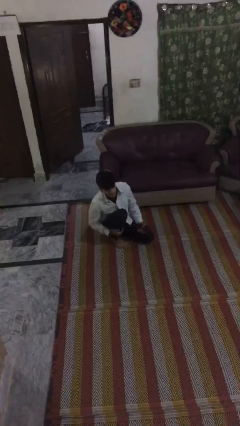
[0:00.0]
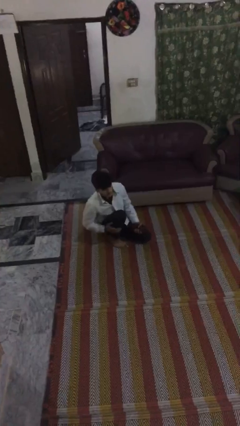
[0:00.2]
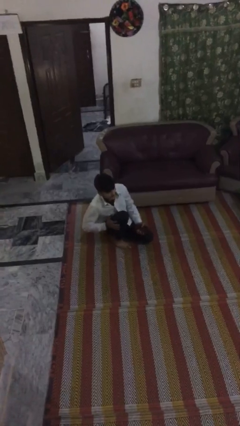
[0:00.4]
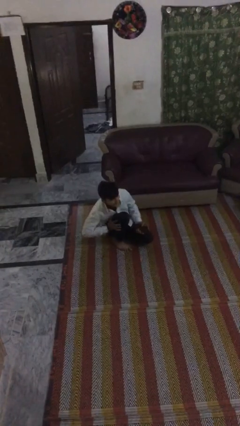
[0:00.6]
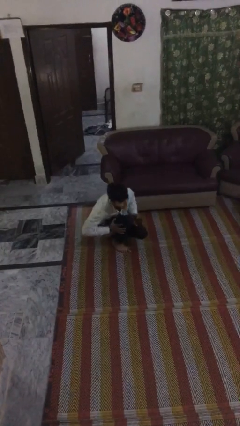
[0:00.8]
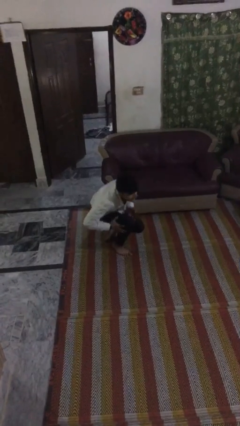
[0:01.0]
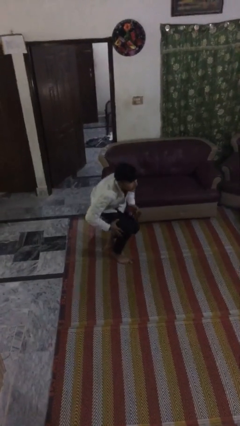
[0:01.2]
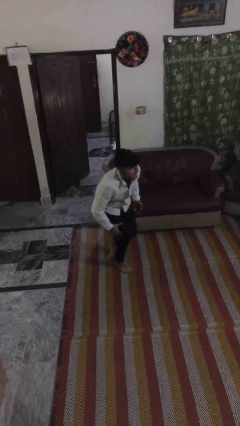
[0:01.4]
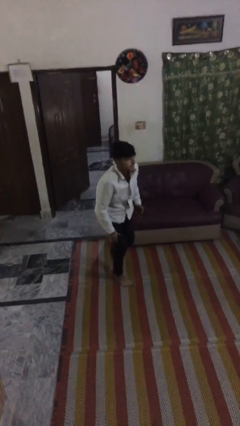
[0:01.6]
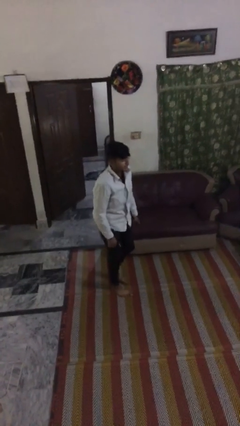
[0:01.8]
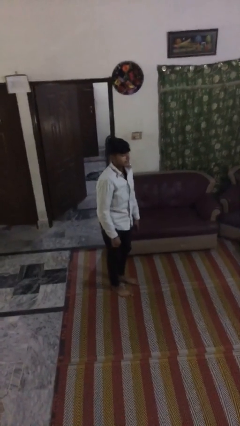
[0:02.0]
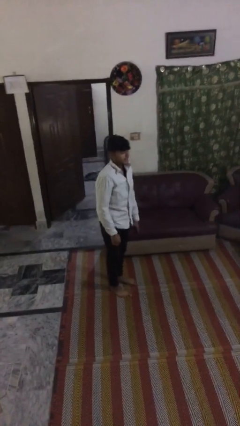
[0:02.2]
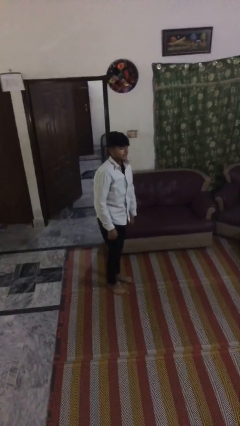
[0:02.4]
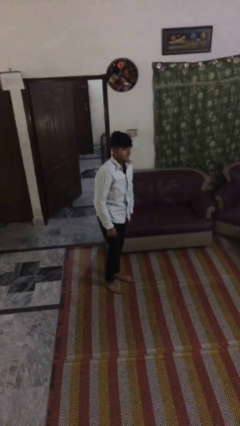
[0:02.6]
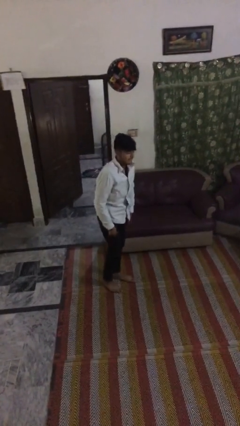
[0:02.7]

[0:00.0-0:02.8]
person stands up

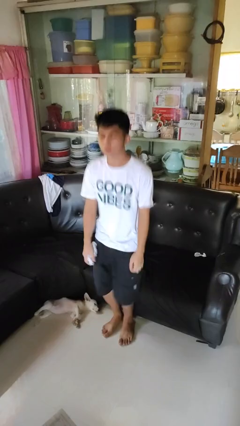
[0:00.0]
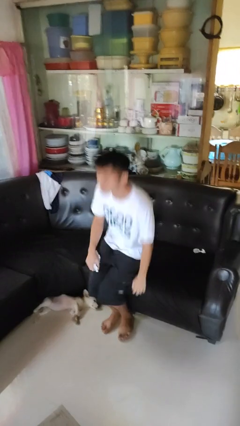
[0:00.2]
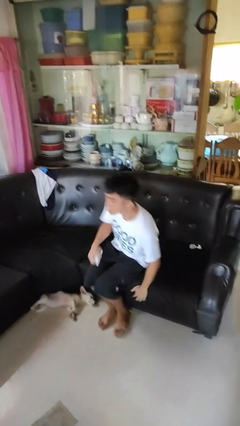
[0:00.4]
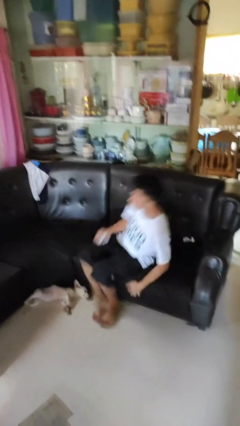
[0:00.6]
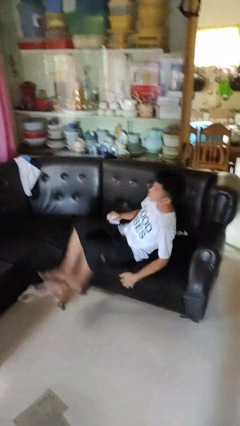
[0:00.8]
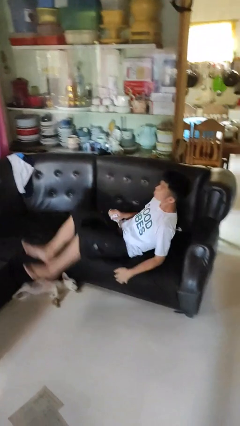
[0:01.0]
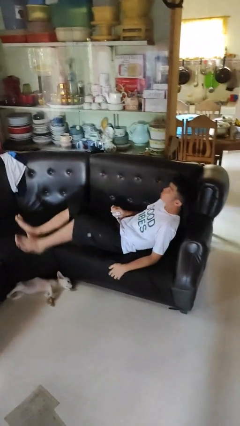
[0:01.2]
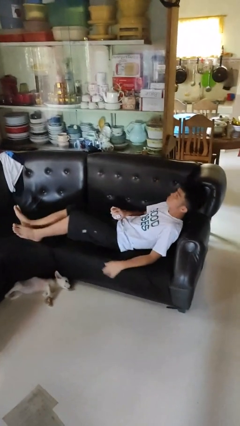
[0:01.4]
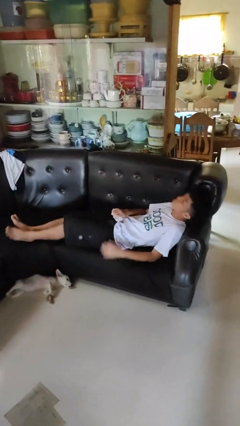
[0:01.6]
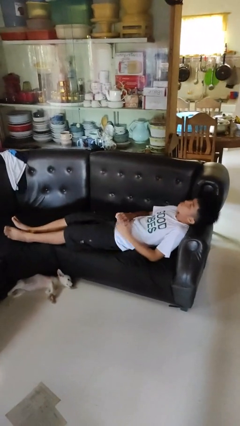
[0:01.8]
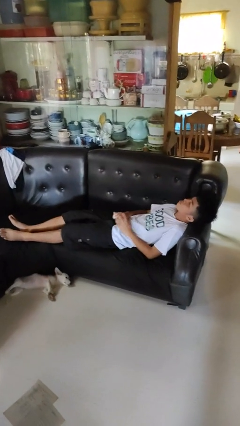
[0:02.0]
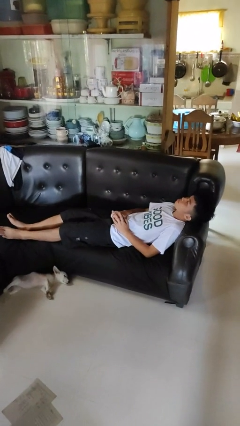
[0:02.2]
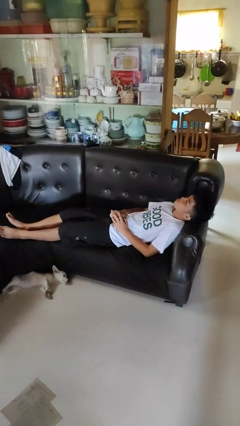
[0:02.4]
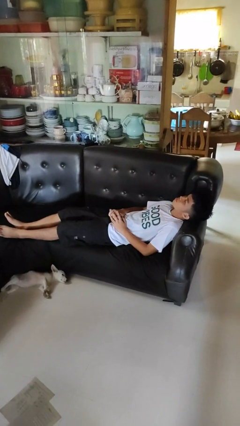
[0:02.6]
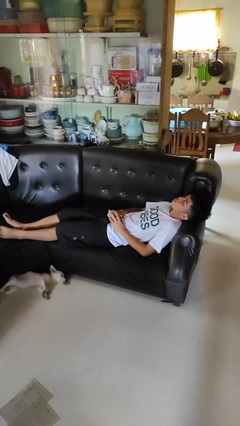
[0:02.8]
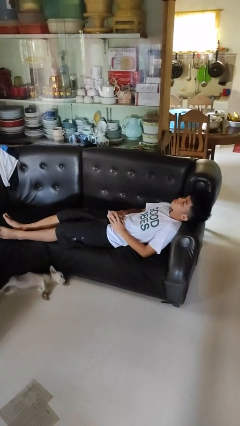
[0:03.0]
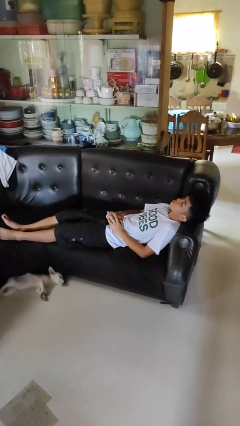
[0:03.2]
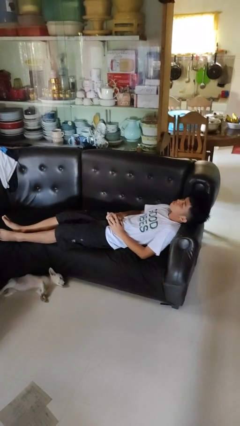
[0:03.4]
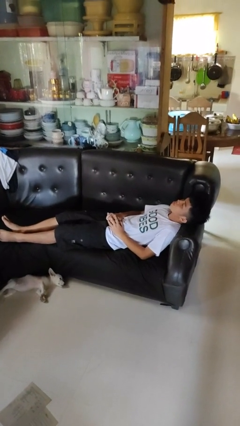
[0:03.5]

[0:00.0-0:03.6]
person lies down on couch

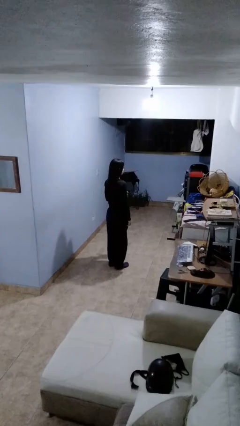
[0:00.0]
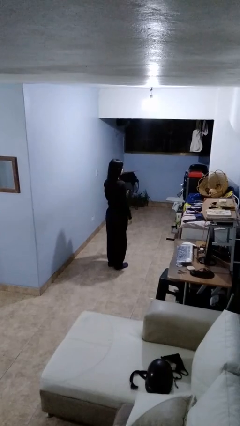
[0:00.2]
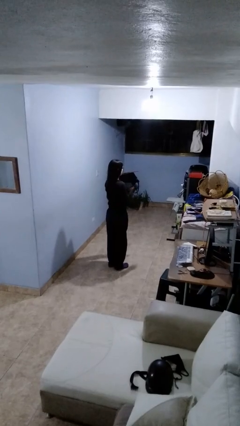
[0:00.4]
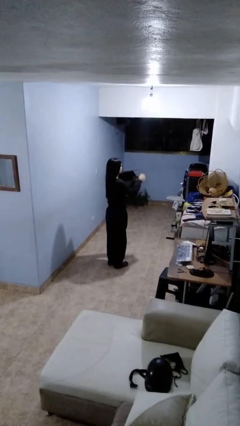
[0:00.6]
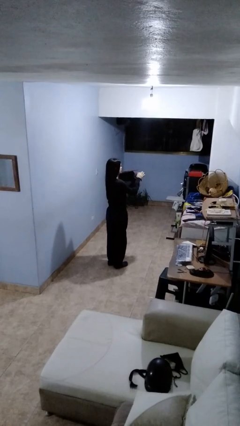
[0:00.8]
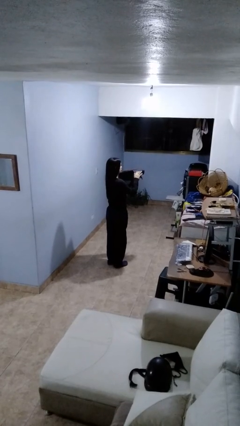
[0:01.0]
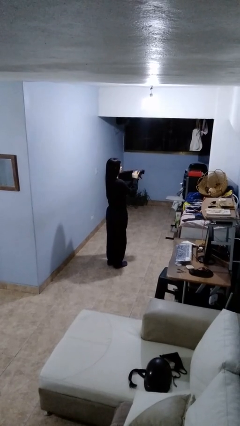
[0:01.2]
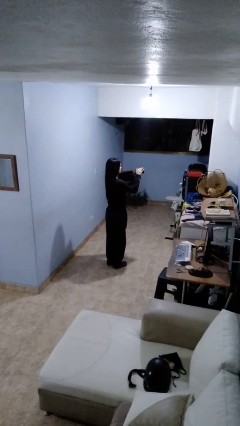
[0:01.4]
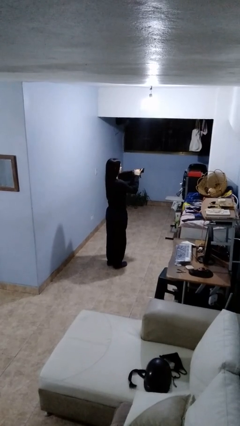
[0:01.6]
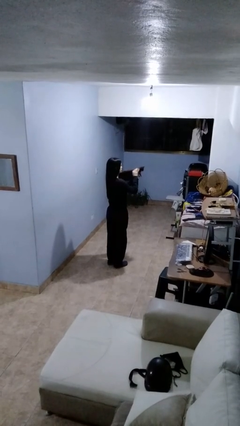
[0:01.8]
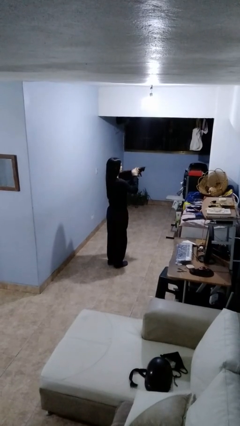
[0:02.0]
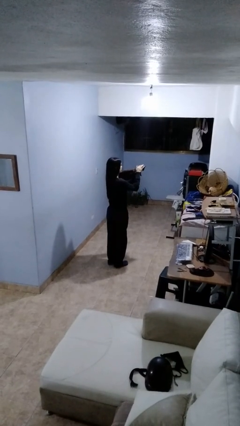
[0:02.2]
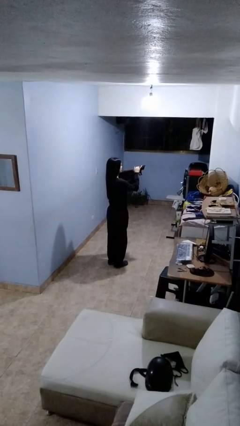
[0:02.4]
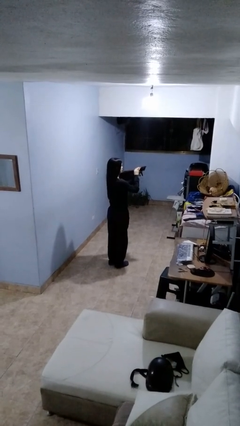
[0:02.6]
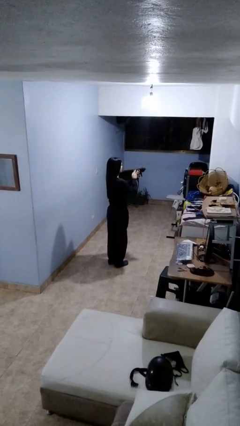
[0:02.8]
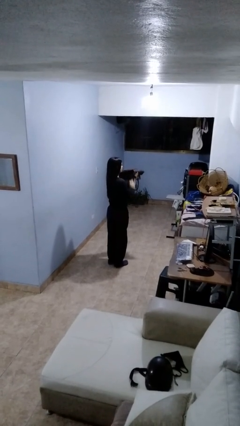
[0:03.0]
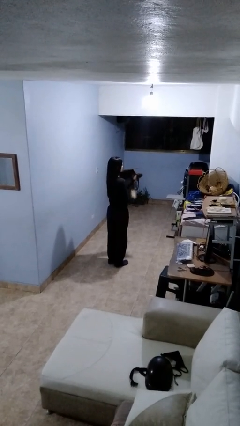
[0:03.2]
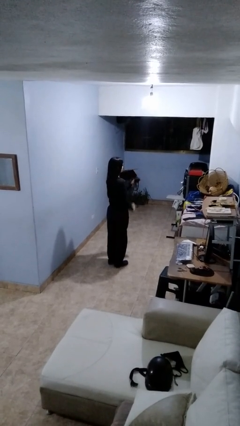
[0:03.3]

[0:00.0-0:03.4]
person pets cat

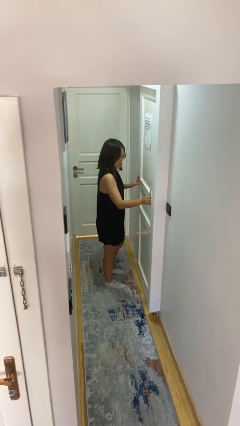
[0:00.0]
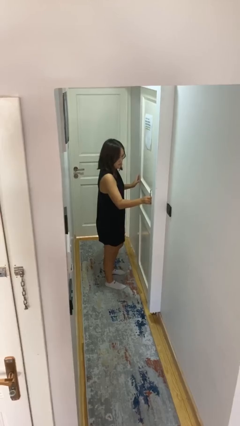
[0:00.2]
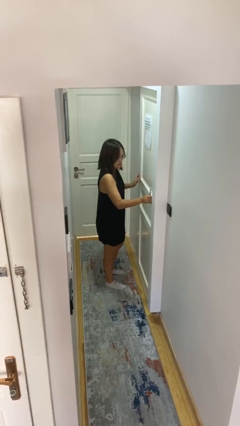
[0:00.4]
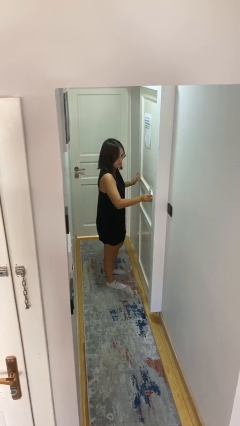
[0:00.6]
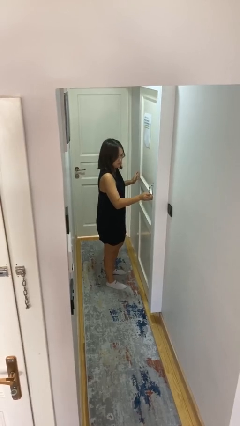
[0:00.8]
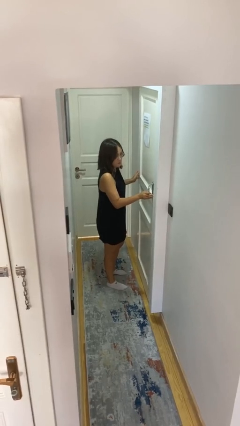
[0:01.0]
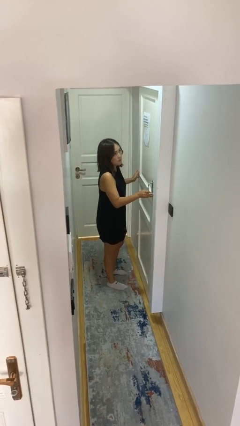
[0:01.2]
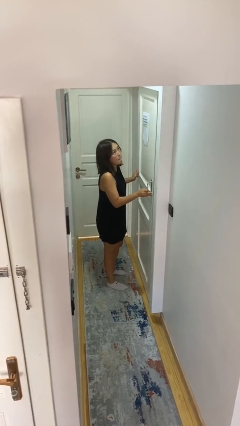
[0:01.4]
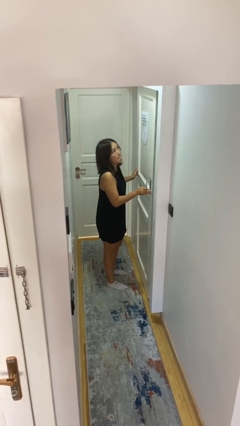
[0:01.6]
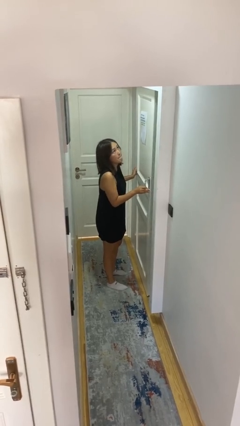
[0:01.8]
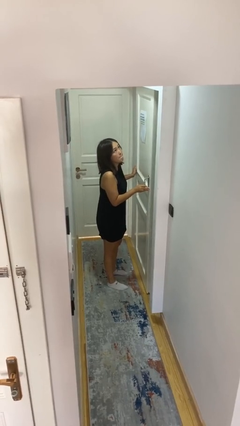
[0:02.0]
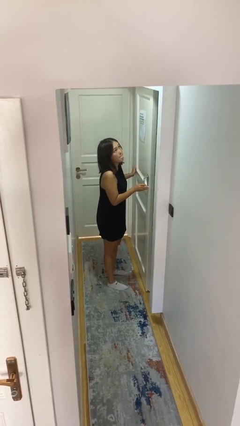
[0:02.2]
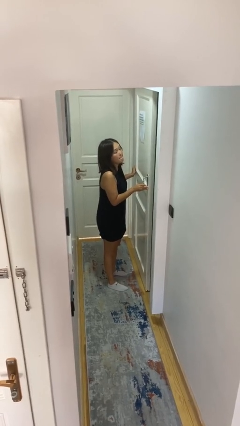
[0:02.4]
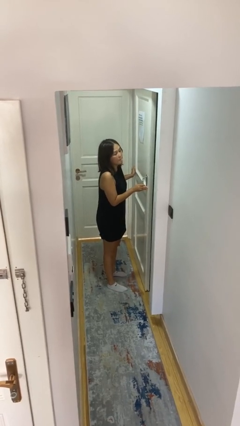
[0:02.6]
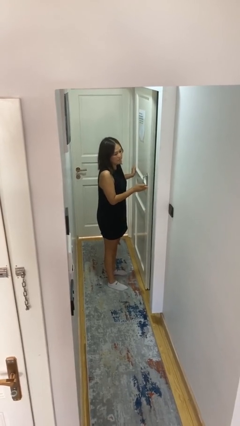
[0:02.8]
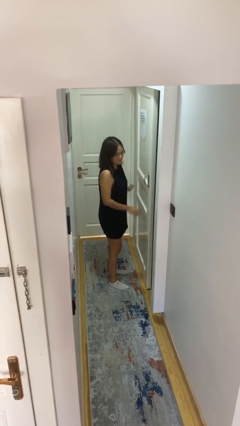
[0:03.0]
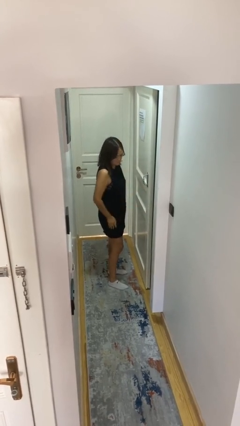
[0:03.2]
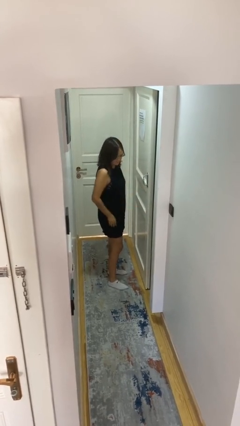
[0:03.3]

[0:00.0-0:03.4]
person opens sliding door

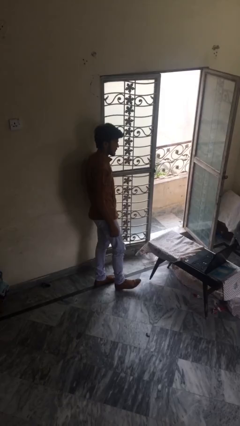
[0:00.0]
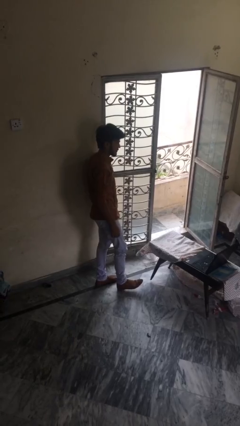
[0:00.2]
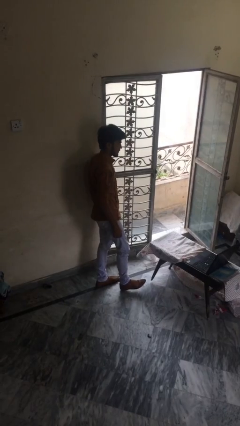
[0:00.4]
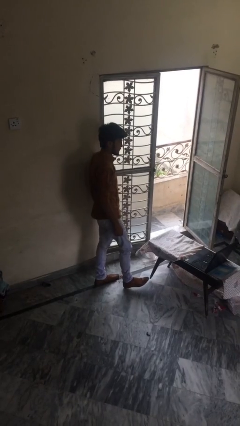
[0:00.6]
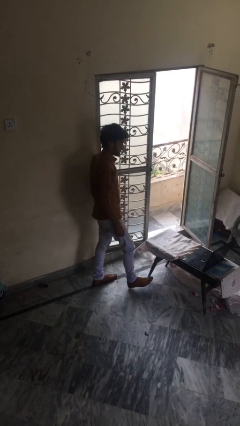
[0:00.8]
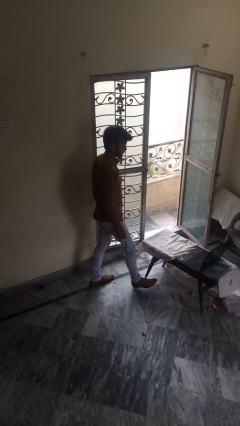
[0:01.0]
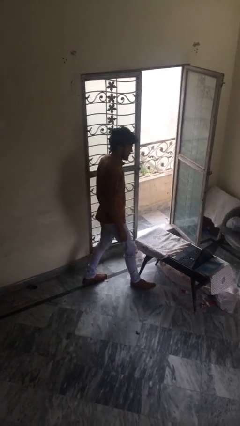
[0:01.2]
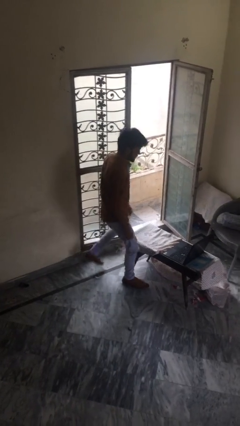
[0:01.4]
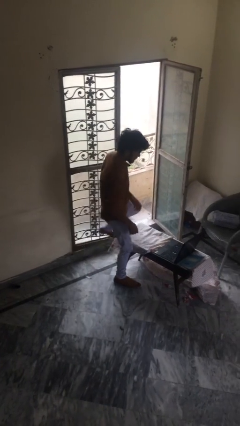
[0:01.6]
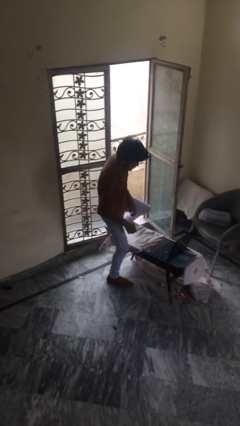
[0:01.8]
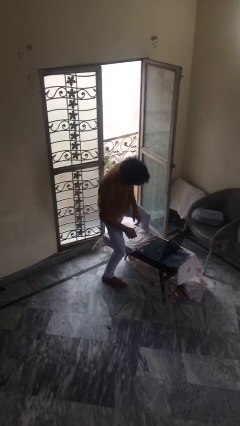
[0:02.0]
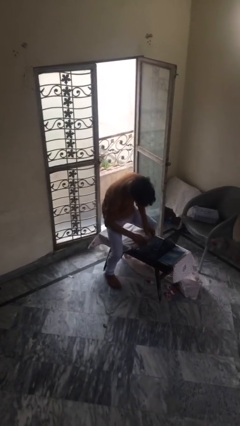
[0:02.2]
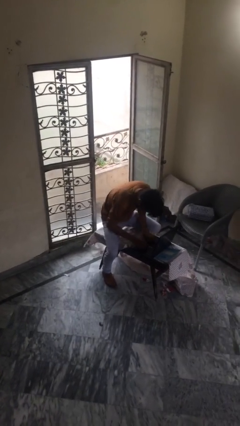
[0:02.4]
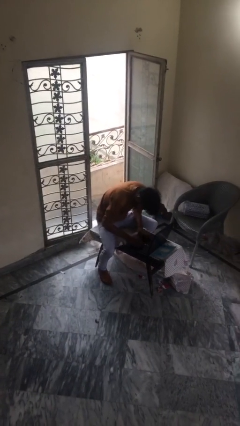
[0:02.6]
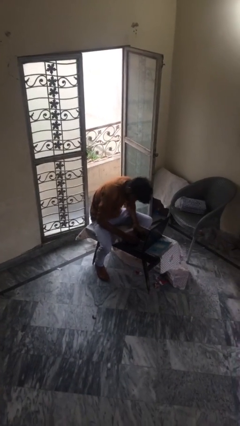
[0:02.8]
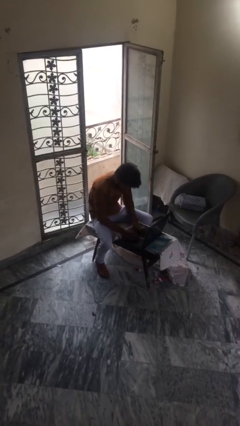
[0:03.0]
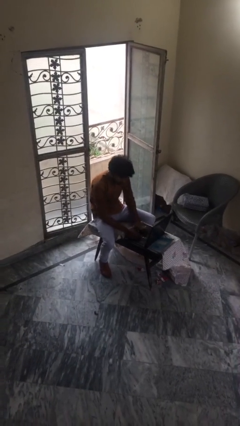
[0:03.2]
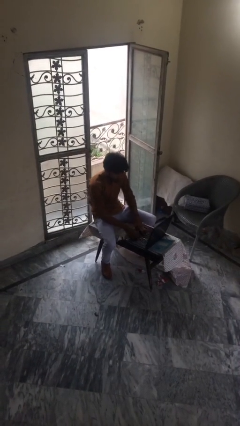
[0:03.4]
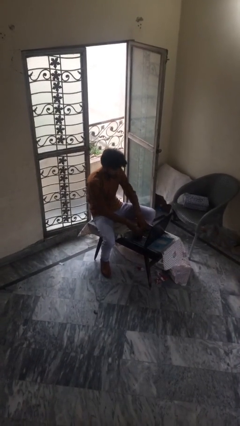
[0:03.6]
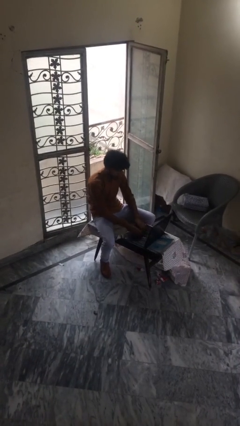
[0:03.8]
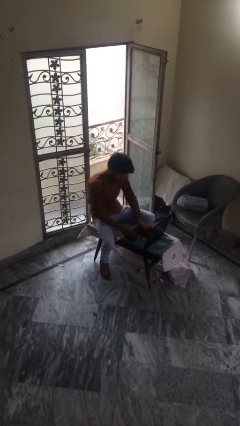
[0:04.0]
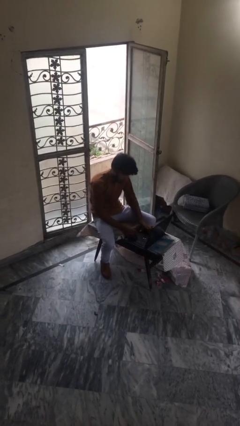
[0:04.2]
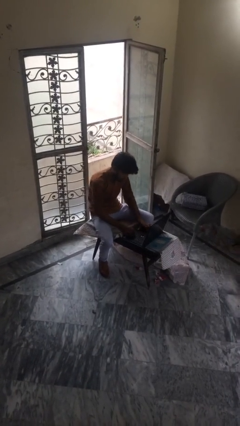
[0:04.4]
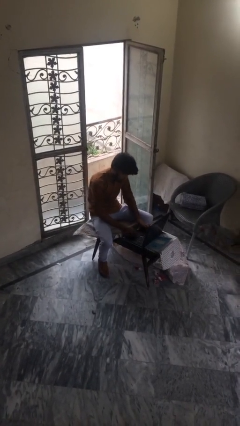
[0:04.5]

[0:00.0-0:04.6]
person sits down

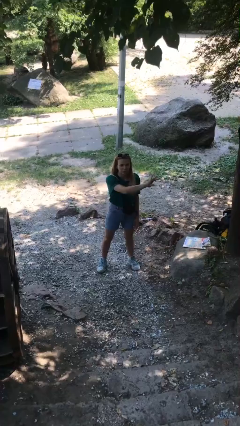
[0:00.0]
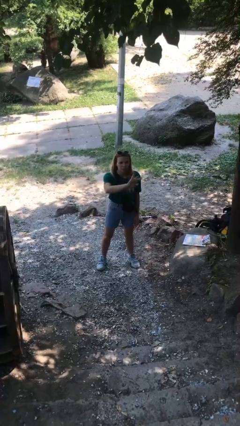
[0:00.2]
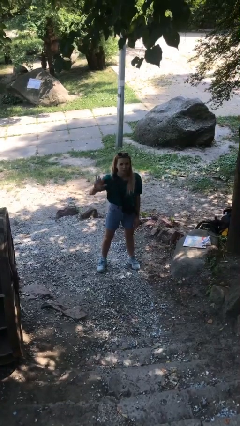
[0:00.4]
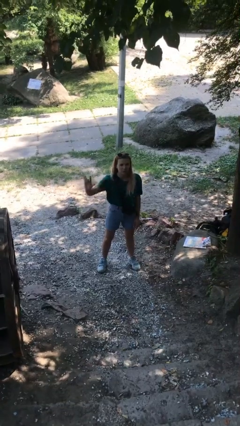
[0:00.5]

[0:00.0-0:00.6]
person gestures swipe right
